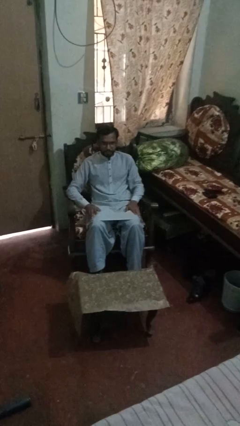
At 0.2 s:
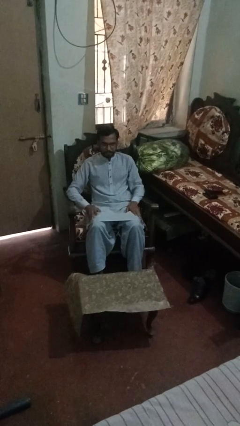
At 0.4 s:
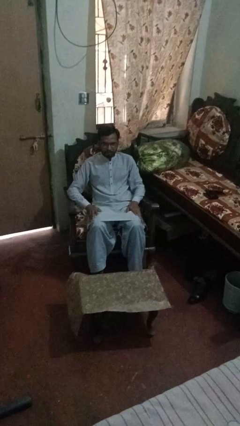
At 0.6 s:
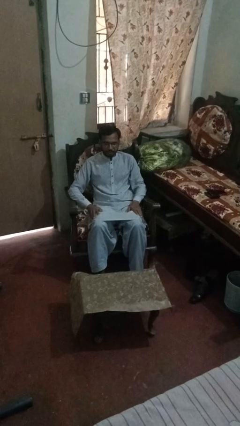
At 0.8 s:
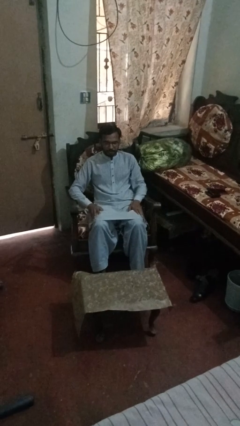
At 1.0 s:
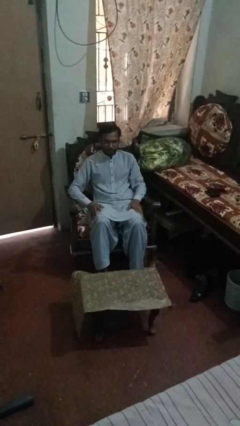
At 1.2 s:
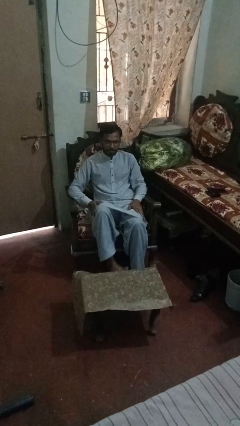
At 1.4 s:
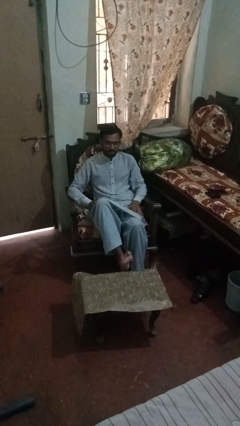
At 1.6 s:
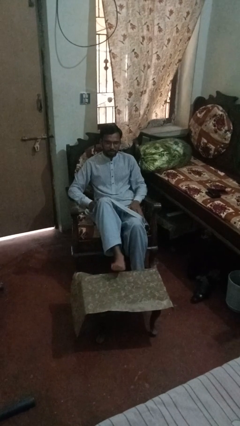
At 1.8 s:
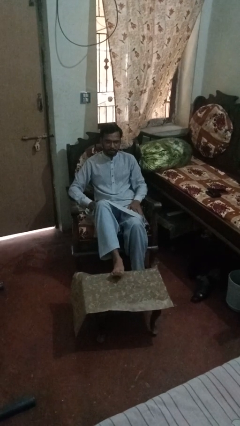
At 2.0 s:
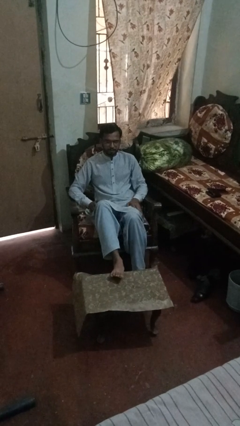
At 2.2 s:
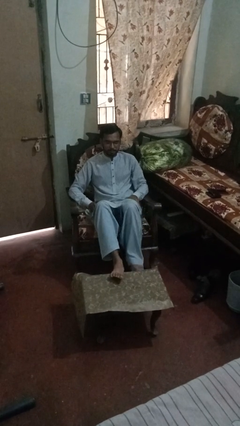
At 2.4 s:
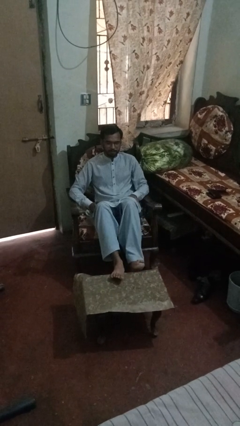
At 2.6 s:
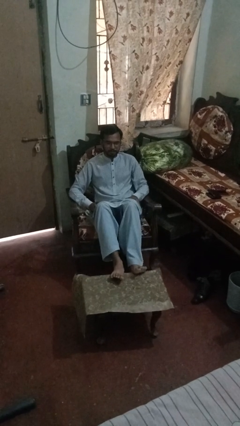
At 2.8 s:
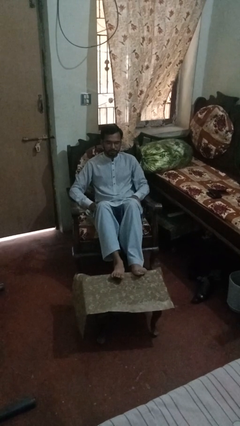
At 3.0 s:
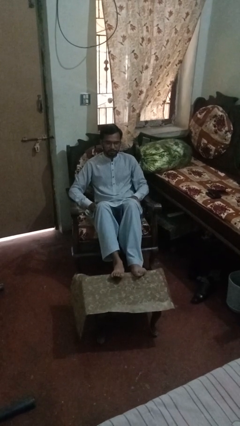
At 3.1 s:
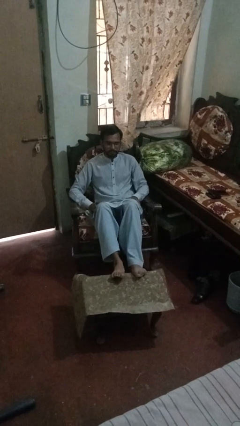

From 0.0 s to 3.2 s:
person puts feet up

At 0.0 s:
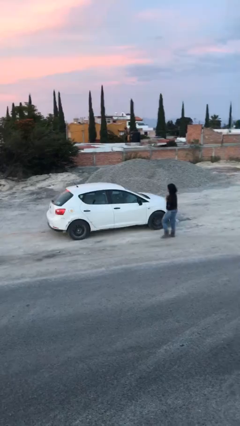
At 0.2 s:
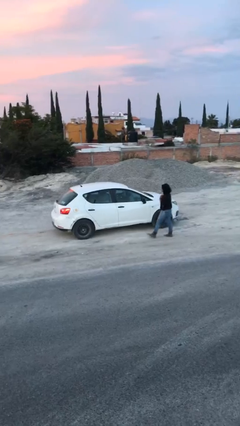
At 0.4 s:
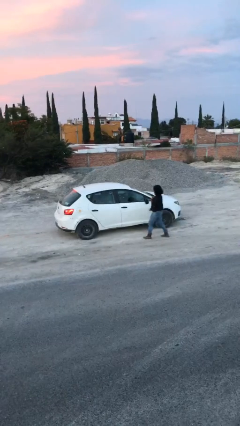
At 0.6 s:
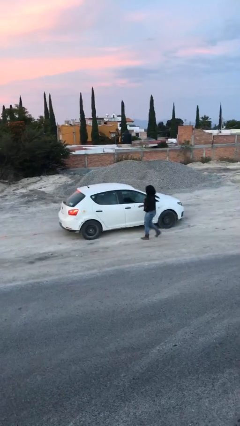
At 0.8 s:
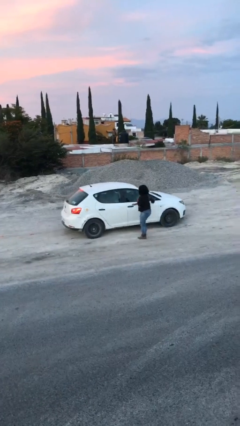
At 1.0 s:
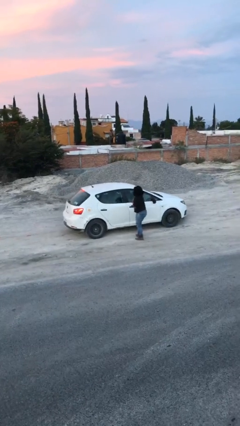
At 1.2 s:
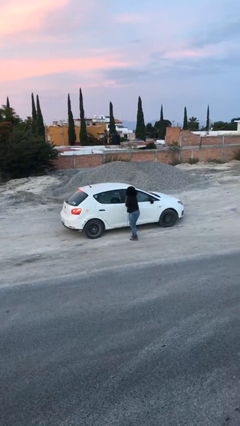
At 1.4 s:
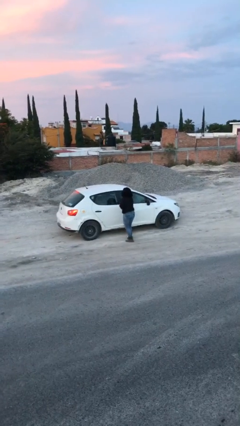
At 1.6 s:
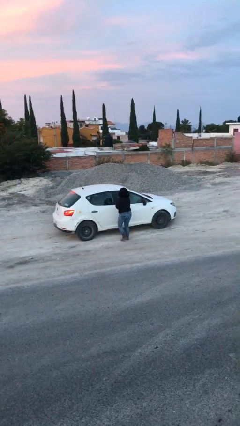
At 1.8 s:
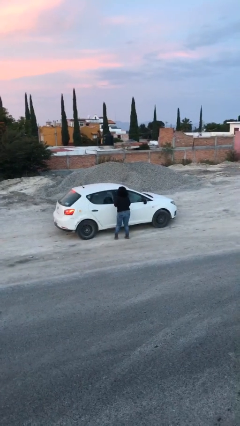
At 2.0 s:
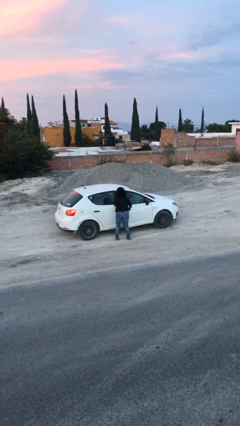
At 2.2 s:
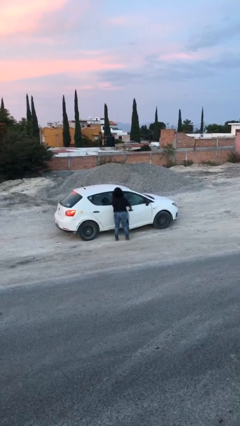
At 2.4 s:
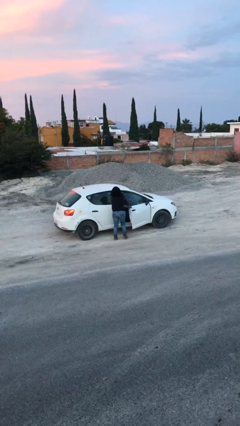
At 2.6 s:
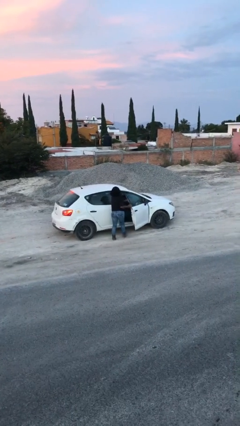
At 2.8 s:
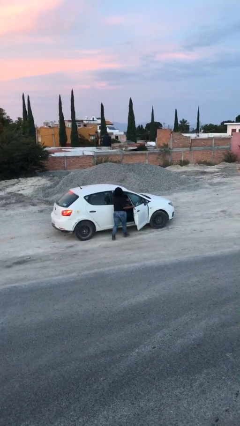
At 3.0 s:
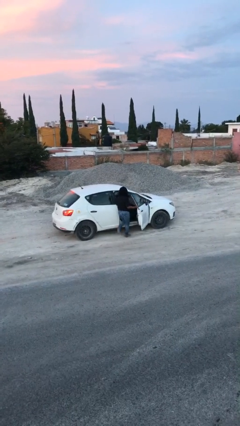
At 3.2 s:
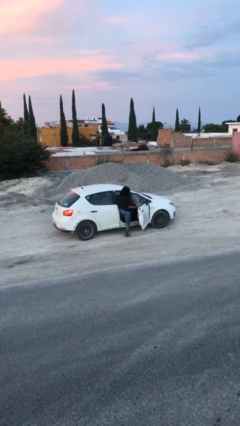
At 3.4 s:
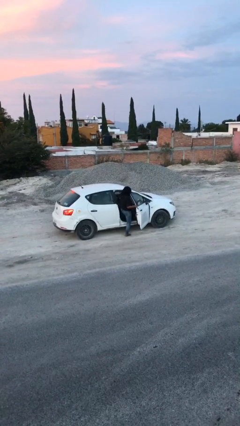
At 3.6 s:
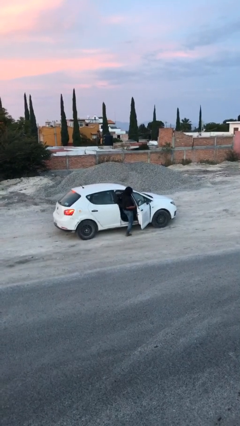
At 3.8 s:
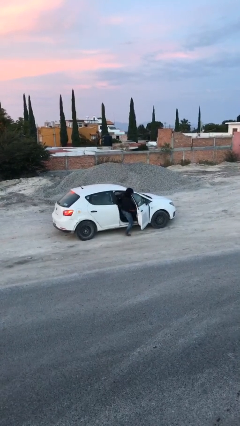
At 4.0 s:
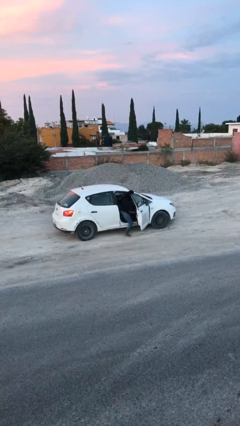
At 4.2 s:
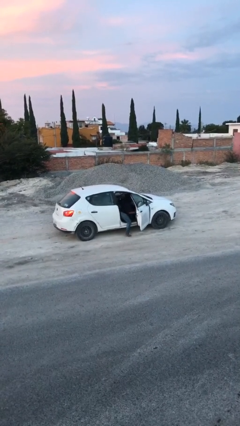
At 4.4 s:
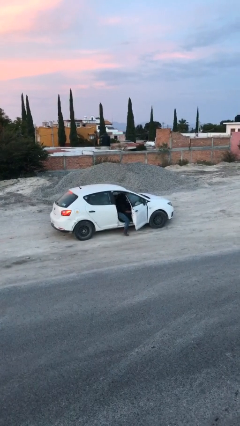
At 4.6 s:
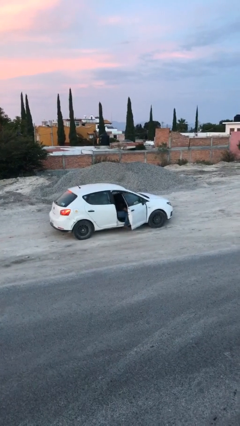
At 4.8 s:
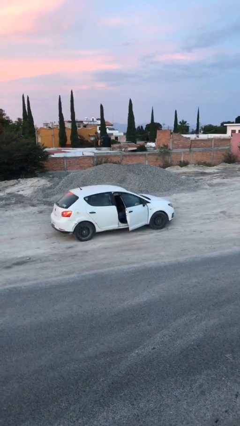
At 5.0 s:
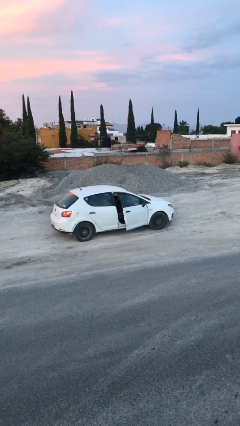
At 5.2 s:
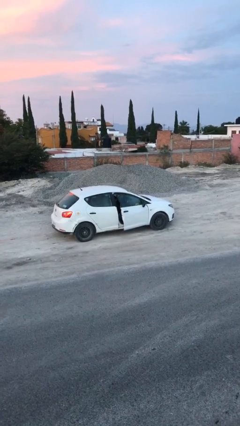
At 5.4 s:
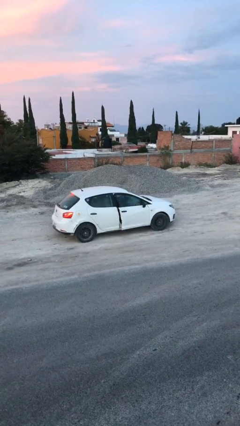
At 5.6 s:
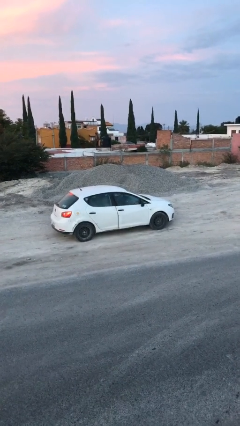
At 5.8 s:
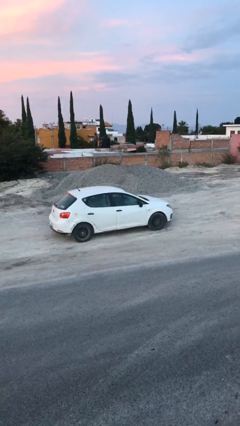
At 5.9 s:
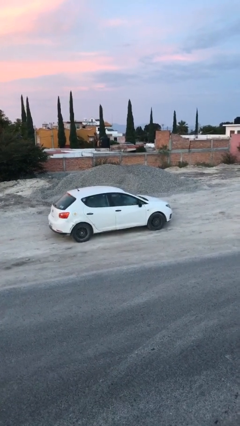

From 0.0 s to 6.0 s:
car picks up person

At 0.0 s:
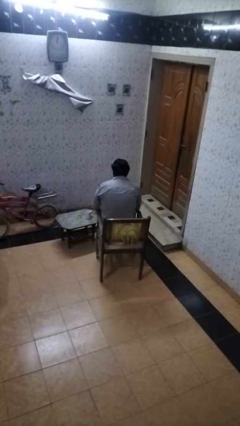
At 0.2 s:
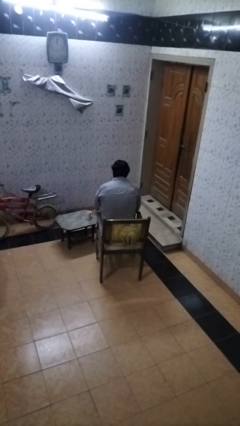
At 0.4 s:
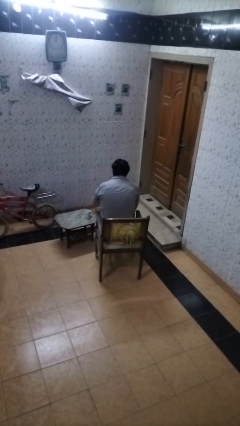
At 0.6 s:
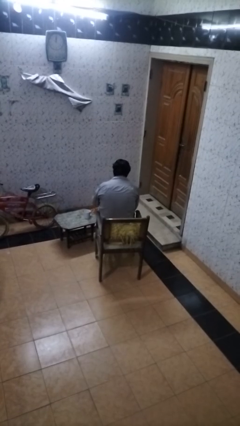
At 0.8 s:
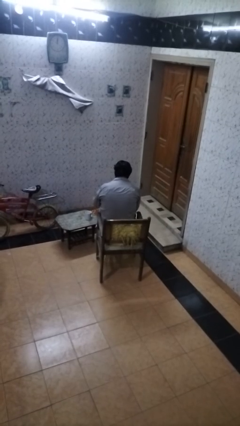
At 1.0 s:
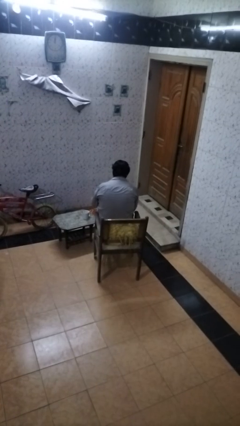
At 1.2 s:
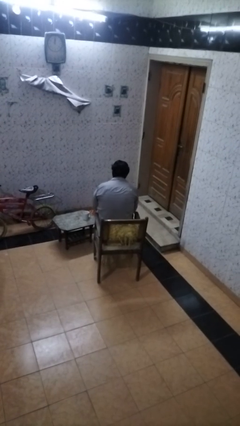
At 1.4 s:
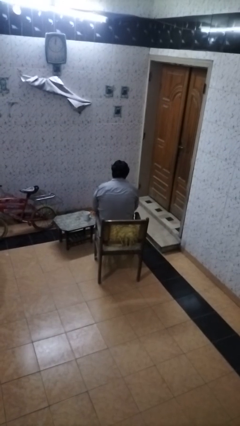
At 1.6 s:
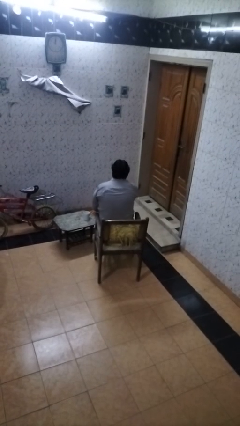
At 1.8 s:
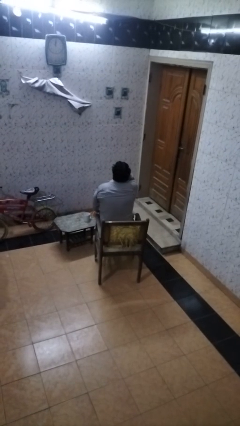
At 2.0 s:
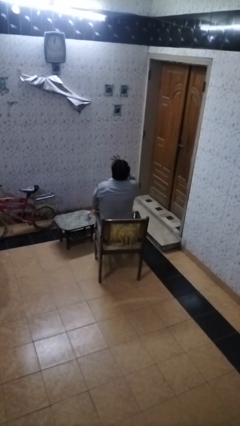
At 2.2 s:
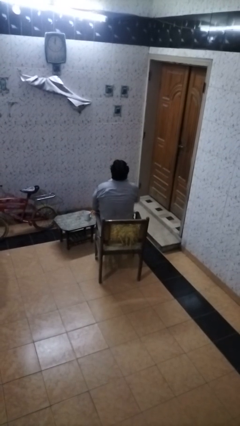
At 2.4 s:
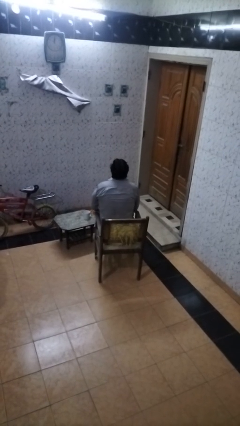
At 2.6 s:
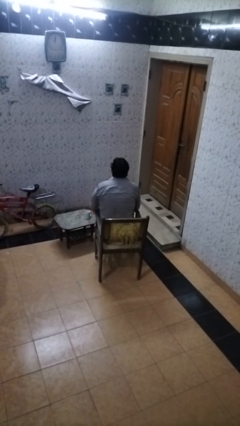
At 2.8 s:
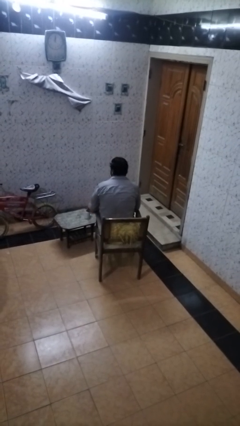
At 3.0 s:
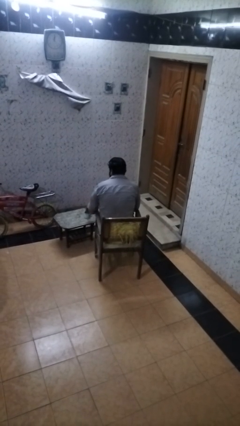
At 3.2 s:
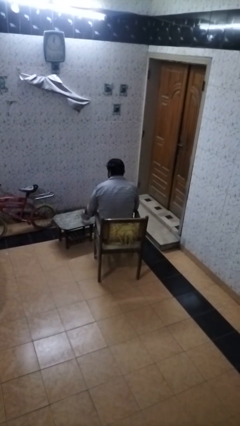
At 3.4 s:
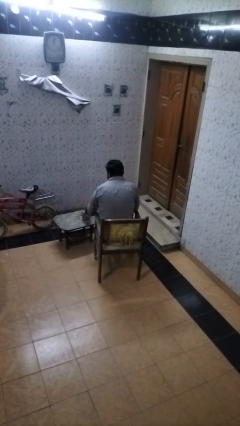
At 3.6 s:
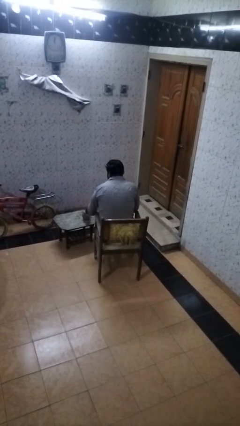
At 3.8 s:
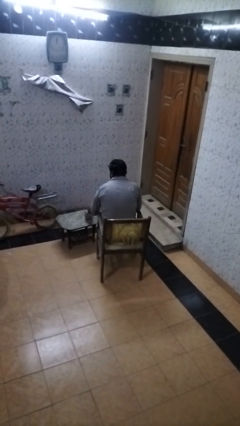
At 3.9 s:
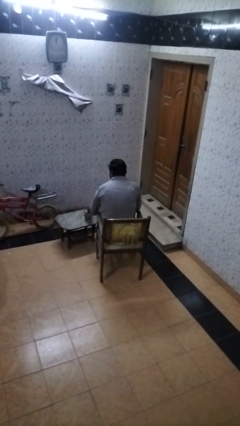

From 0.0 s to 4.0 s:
person takes medicine pills

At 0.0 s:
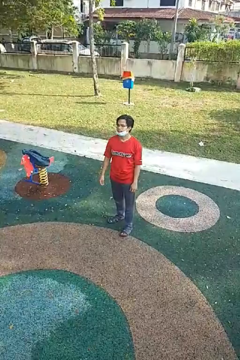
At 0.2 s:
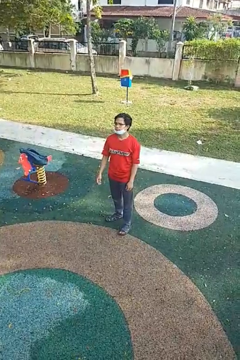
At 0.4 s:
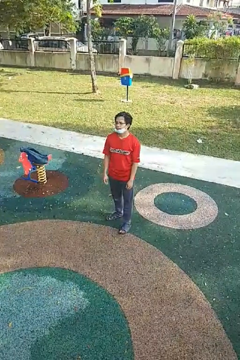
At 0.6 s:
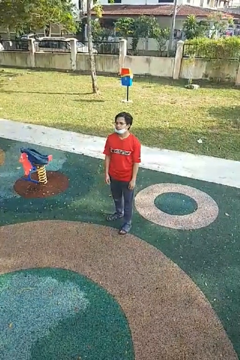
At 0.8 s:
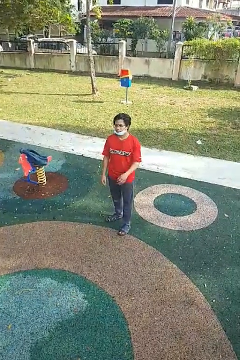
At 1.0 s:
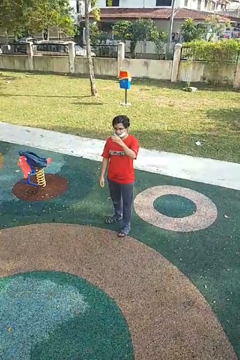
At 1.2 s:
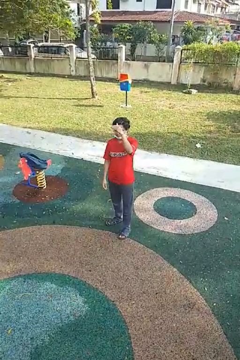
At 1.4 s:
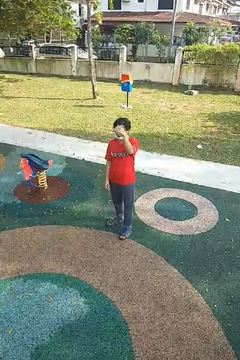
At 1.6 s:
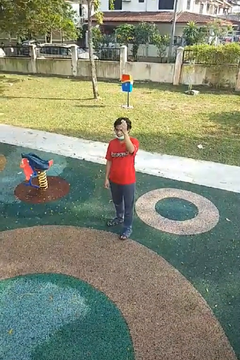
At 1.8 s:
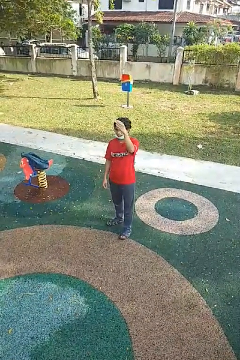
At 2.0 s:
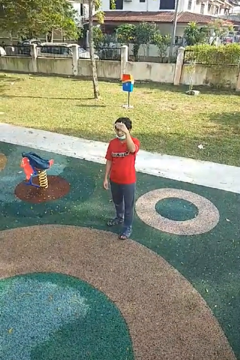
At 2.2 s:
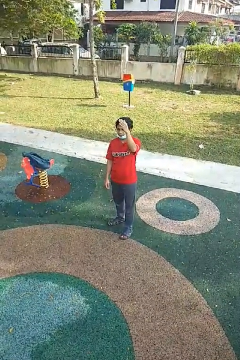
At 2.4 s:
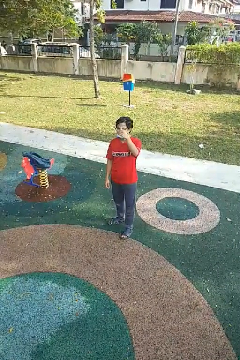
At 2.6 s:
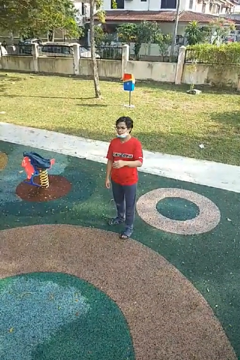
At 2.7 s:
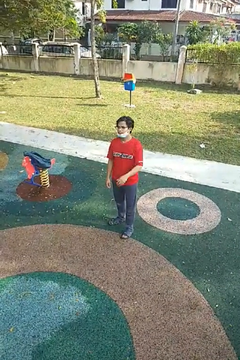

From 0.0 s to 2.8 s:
person gestures come here

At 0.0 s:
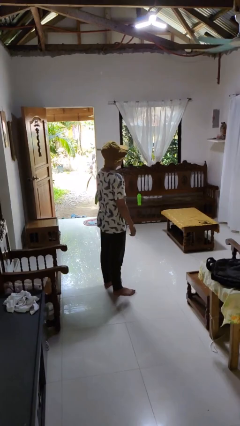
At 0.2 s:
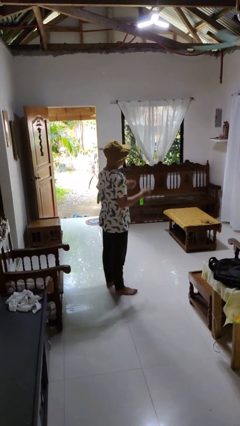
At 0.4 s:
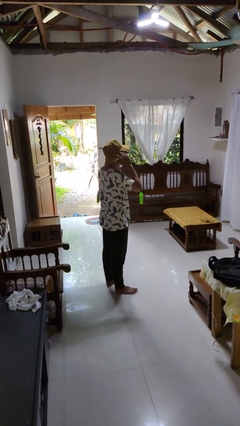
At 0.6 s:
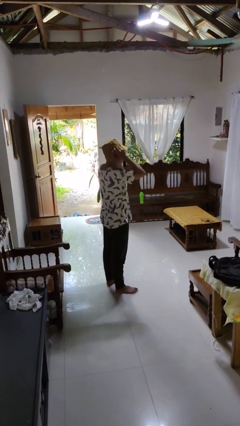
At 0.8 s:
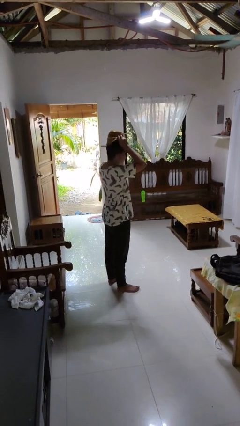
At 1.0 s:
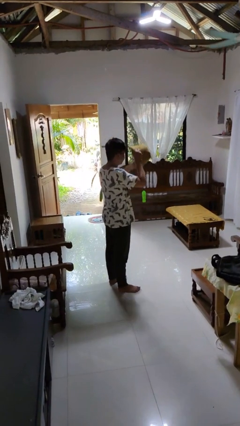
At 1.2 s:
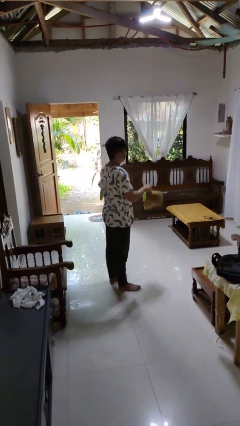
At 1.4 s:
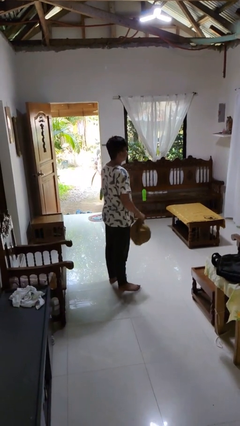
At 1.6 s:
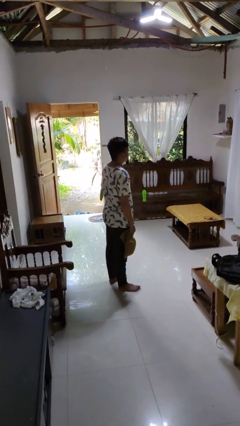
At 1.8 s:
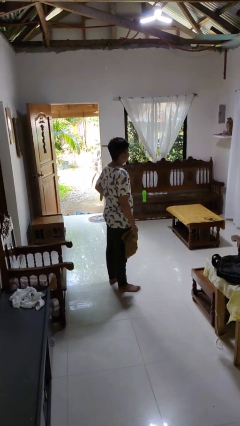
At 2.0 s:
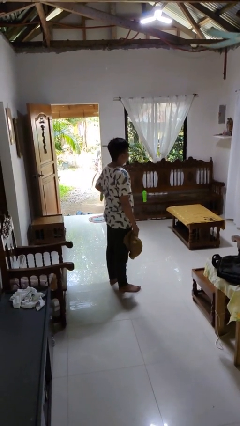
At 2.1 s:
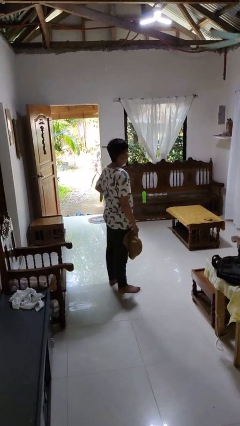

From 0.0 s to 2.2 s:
person takes off hat
